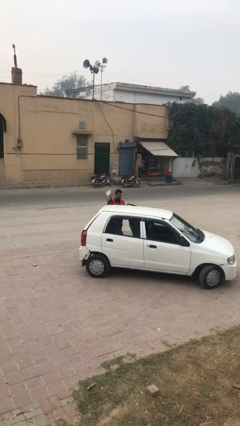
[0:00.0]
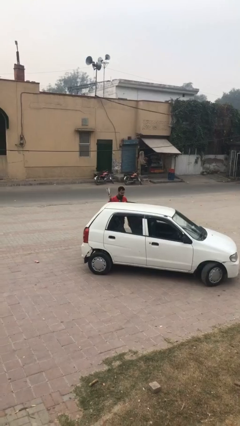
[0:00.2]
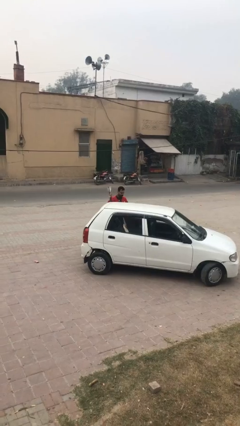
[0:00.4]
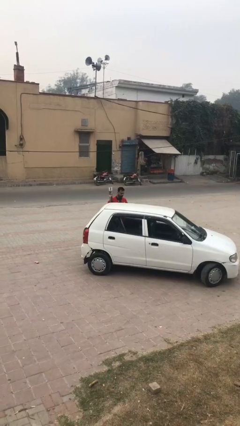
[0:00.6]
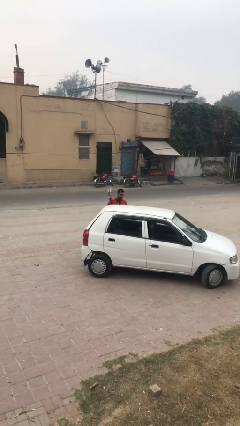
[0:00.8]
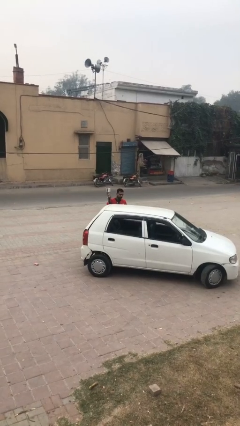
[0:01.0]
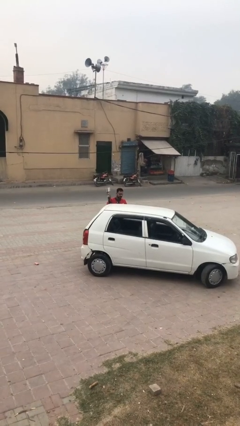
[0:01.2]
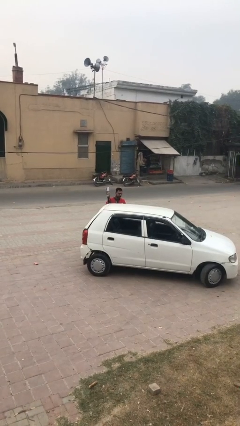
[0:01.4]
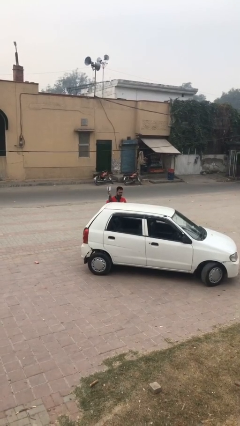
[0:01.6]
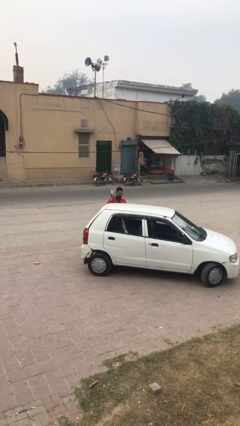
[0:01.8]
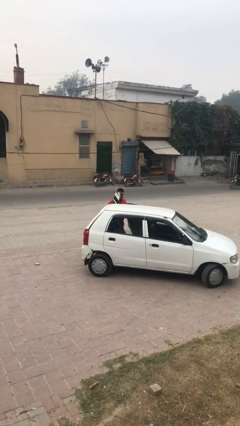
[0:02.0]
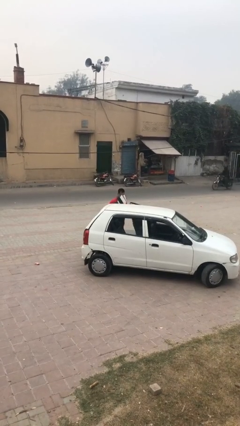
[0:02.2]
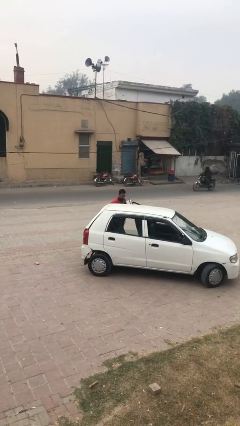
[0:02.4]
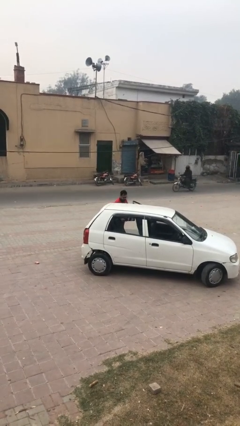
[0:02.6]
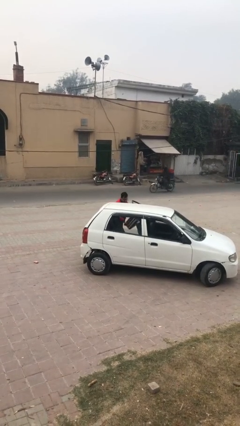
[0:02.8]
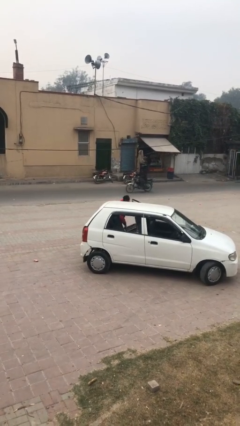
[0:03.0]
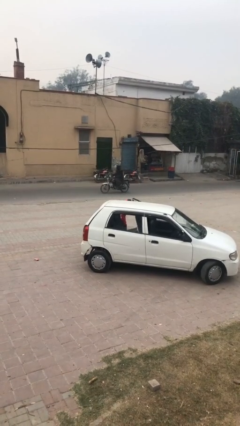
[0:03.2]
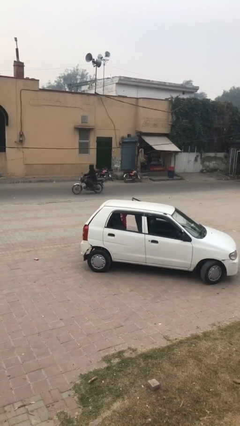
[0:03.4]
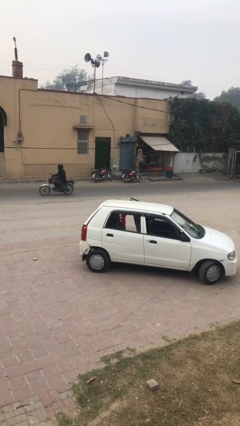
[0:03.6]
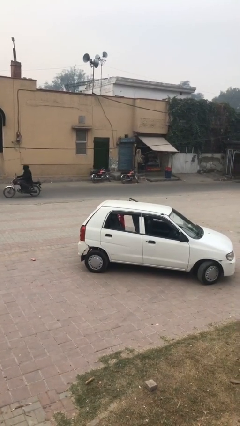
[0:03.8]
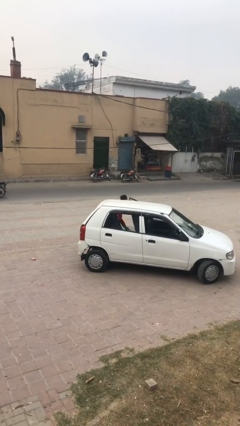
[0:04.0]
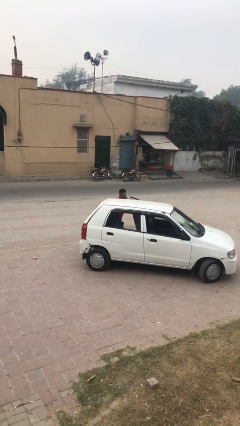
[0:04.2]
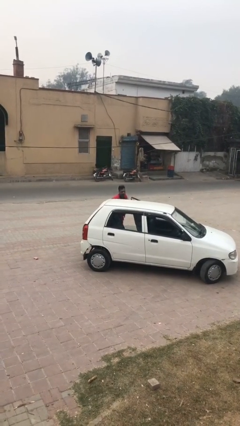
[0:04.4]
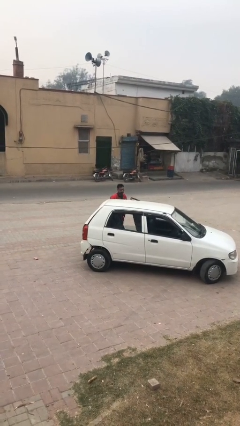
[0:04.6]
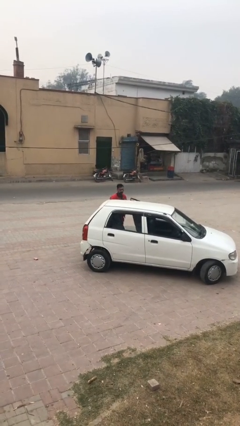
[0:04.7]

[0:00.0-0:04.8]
person loads car

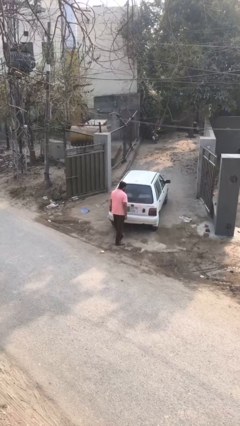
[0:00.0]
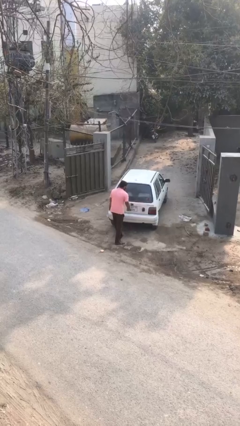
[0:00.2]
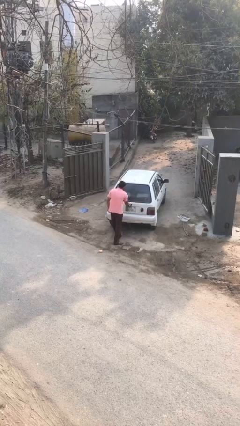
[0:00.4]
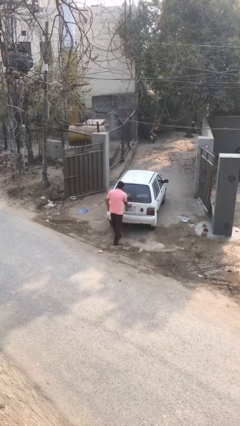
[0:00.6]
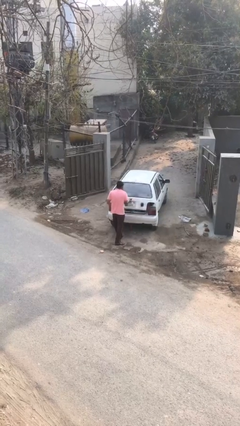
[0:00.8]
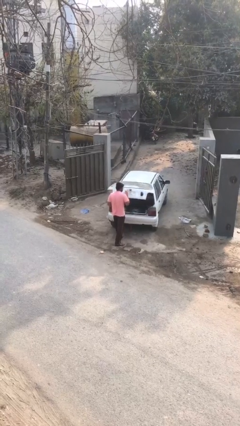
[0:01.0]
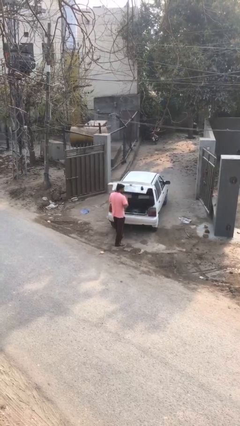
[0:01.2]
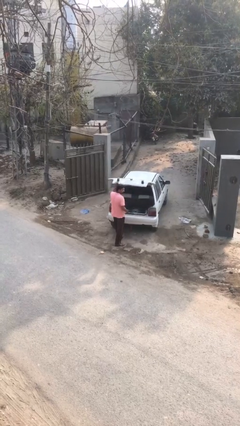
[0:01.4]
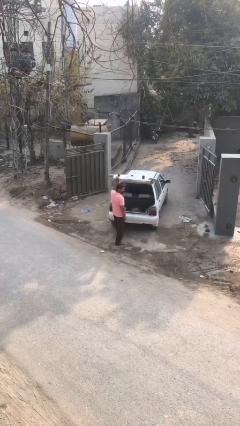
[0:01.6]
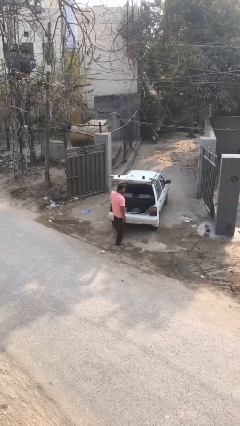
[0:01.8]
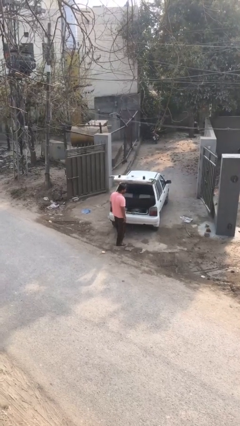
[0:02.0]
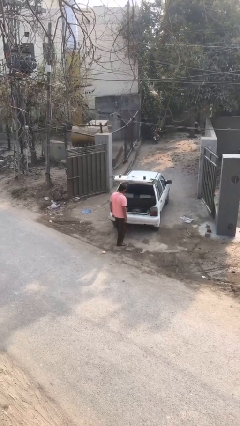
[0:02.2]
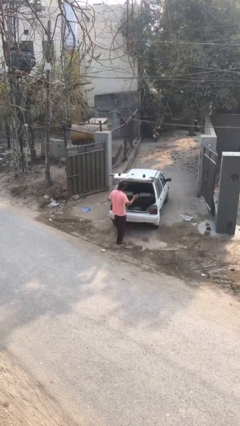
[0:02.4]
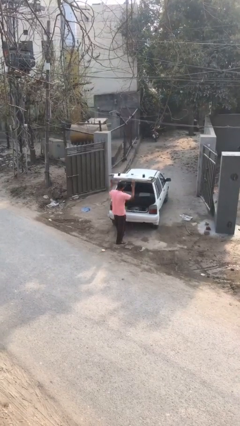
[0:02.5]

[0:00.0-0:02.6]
person opens car trunk

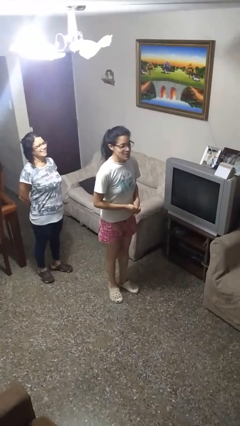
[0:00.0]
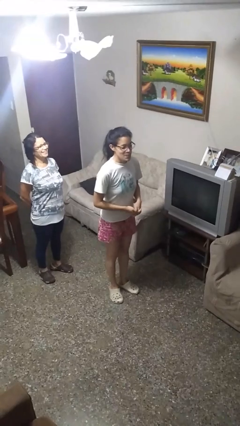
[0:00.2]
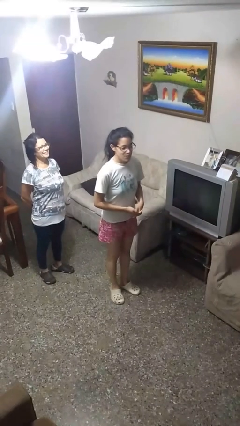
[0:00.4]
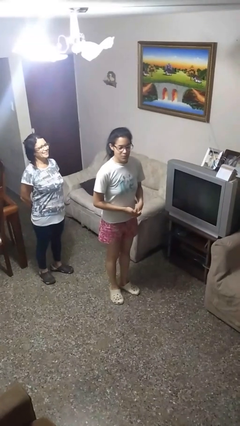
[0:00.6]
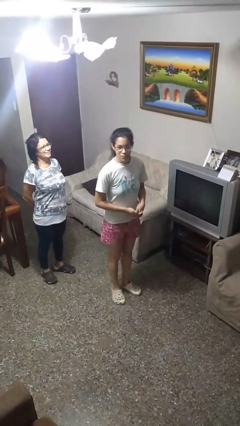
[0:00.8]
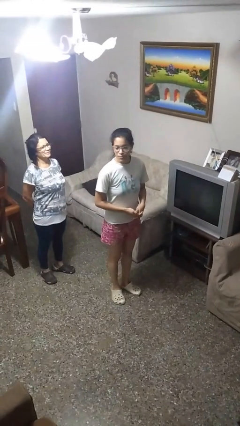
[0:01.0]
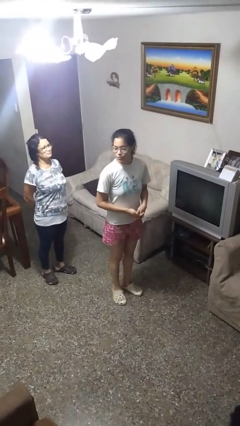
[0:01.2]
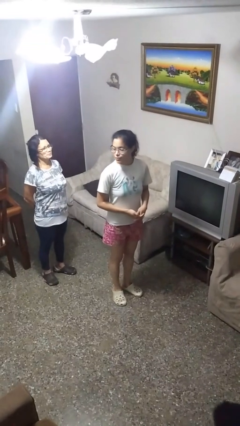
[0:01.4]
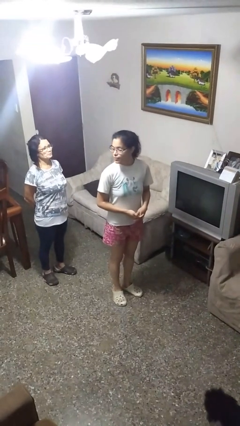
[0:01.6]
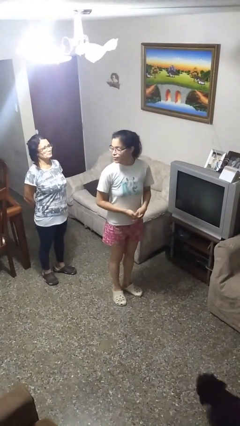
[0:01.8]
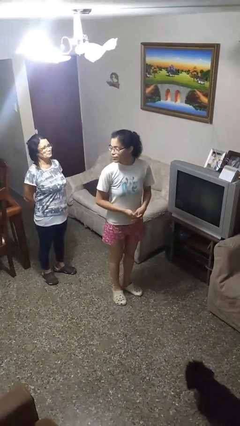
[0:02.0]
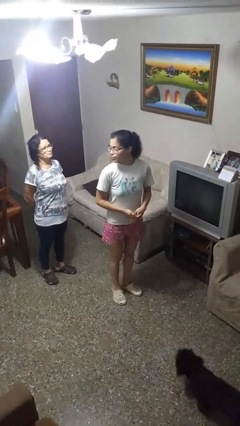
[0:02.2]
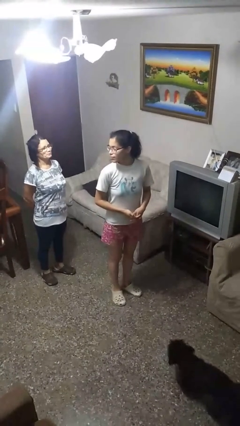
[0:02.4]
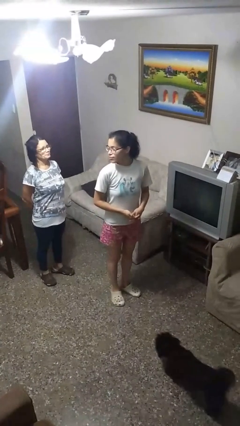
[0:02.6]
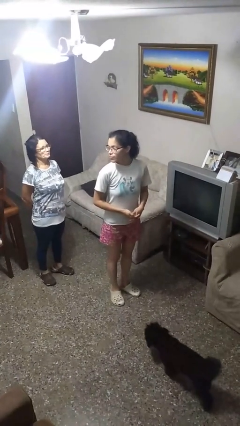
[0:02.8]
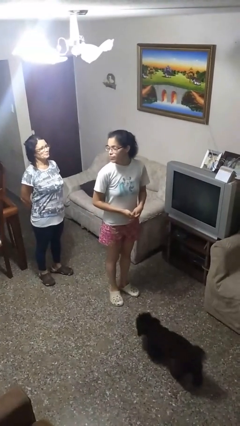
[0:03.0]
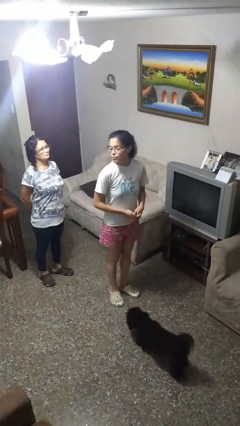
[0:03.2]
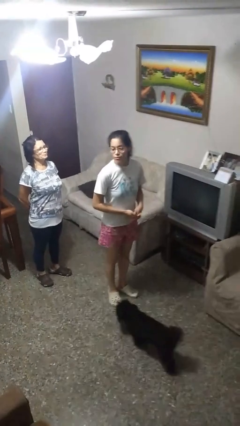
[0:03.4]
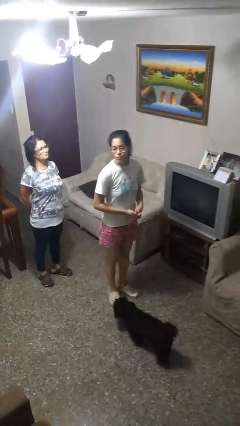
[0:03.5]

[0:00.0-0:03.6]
person looks over shoulder

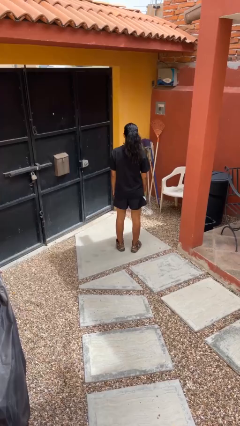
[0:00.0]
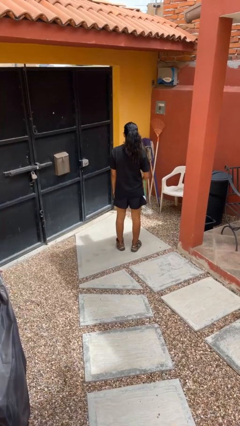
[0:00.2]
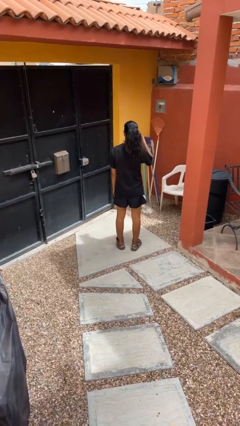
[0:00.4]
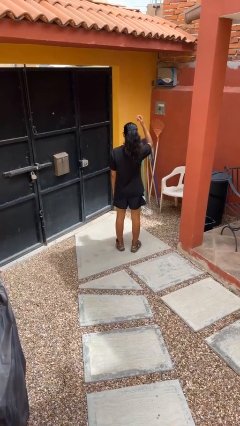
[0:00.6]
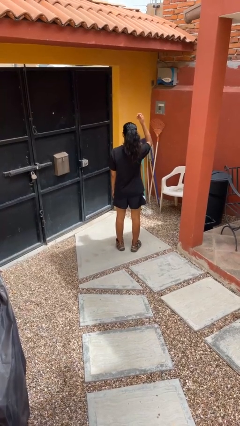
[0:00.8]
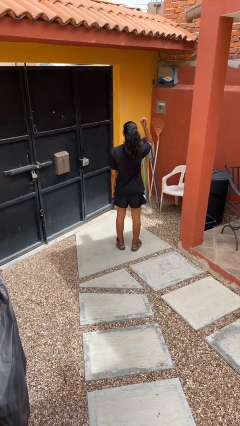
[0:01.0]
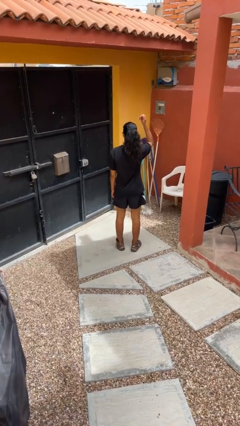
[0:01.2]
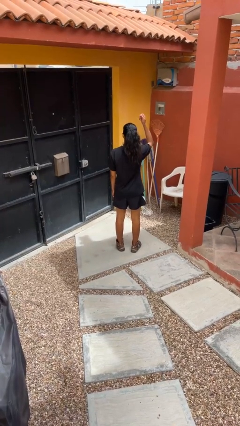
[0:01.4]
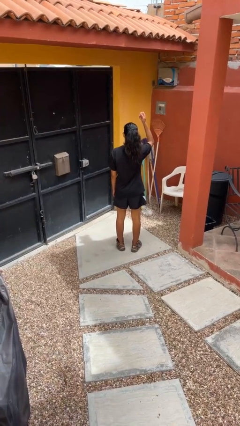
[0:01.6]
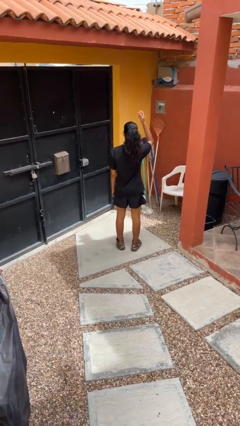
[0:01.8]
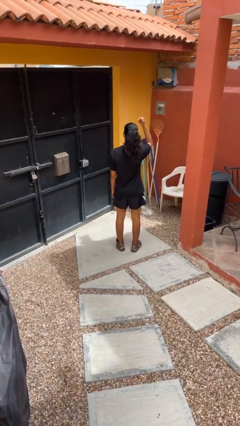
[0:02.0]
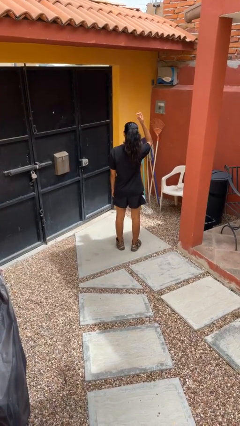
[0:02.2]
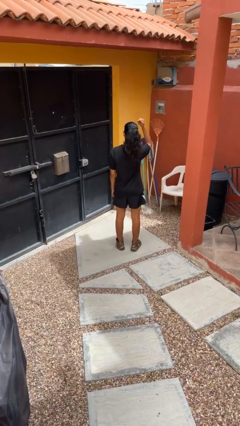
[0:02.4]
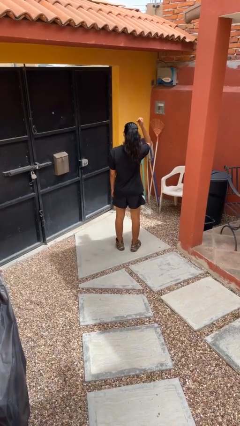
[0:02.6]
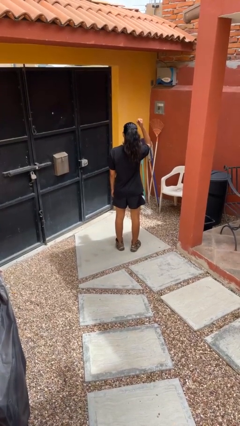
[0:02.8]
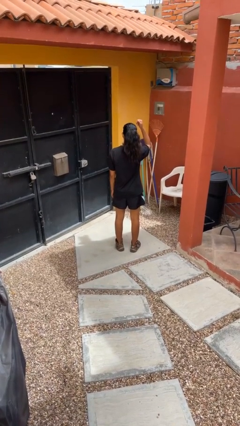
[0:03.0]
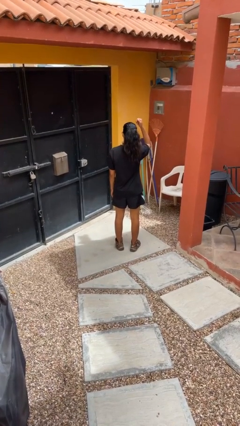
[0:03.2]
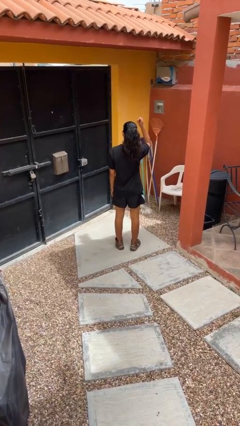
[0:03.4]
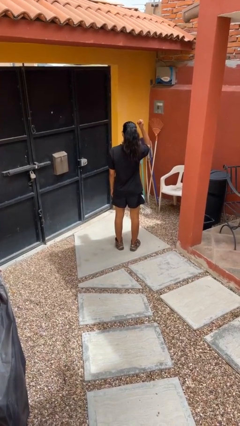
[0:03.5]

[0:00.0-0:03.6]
person gestures come here

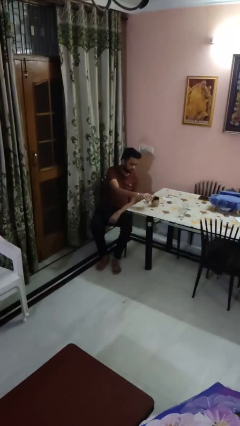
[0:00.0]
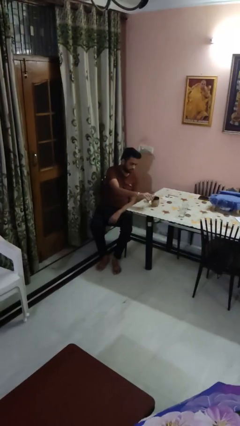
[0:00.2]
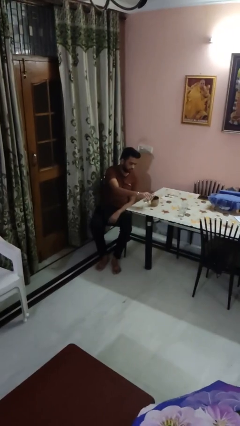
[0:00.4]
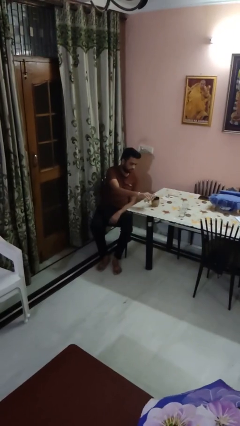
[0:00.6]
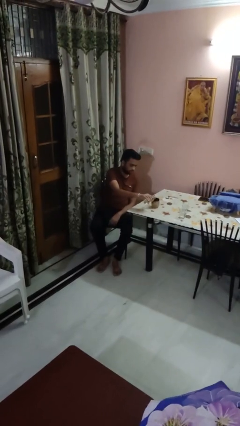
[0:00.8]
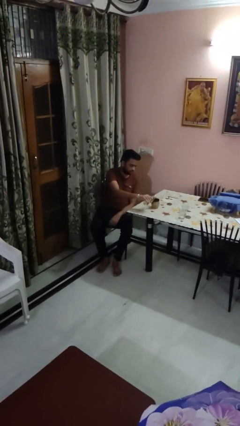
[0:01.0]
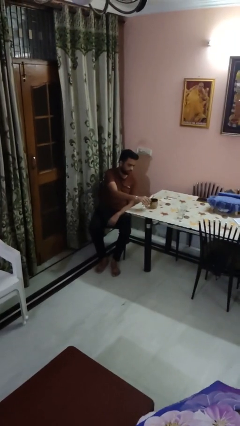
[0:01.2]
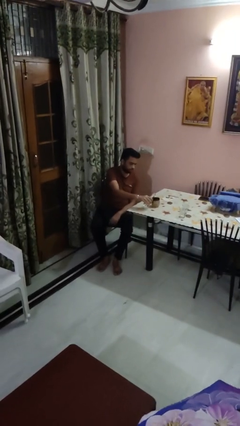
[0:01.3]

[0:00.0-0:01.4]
person pours liquid into cup

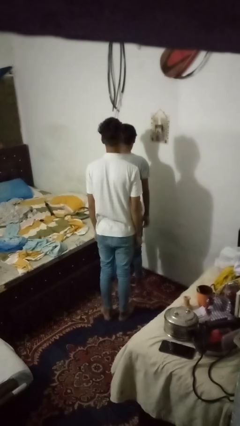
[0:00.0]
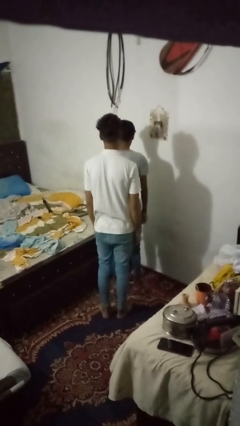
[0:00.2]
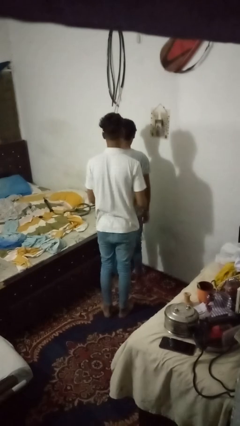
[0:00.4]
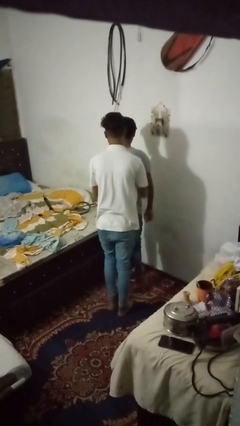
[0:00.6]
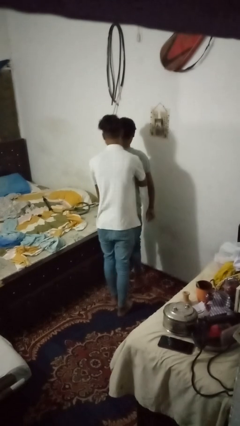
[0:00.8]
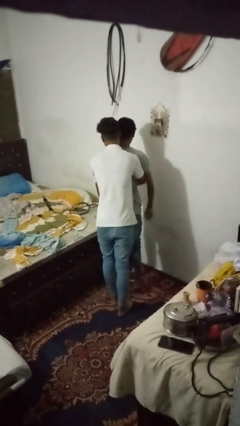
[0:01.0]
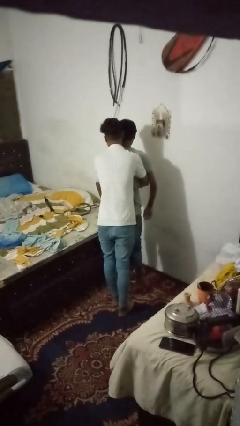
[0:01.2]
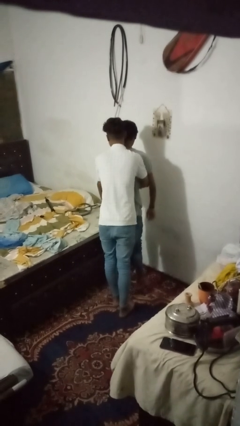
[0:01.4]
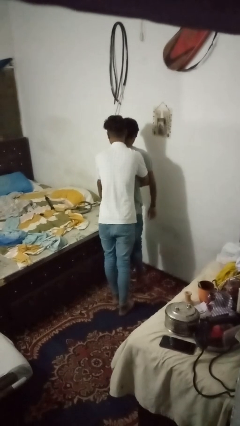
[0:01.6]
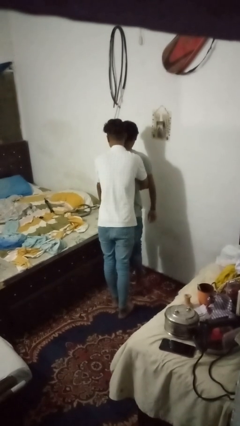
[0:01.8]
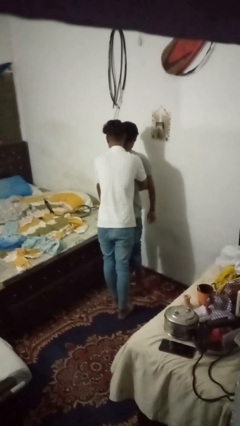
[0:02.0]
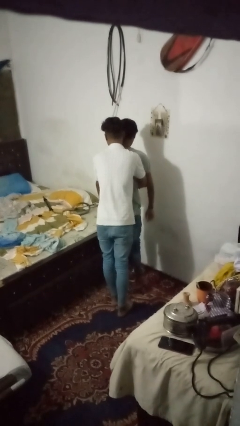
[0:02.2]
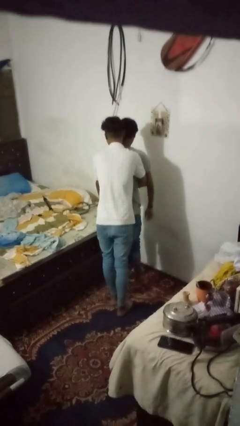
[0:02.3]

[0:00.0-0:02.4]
person hugs person from behind
